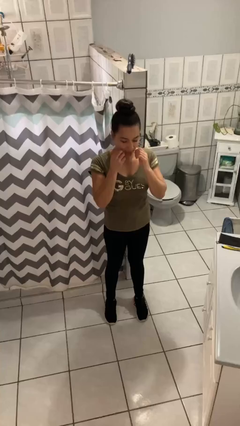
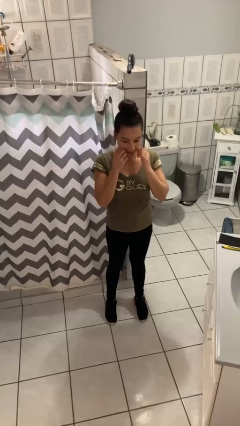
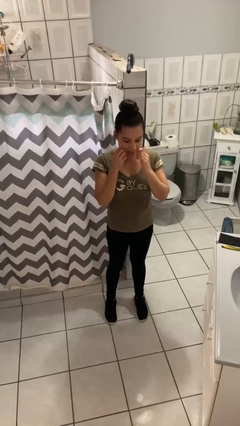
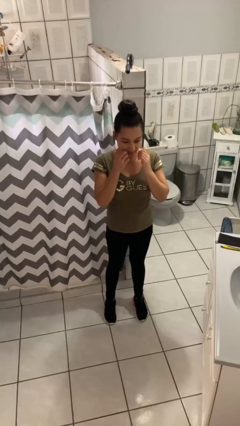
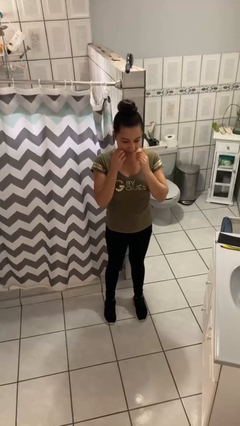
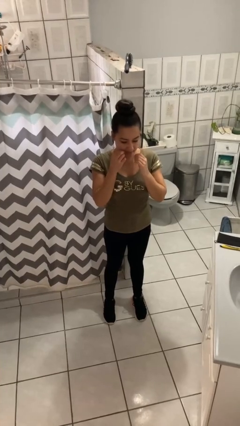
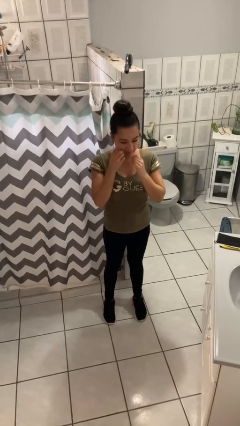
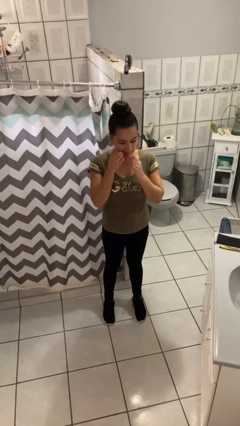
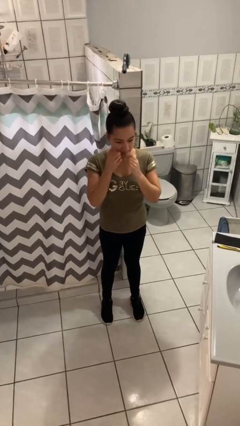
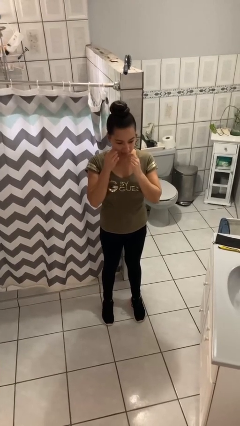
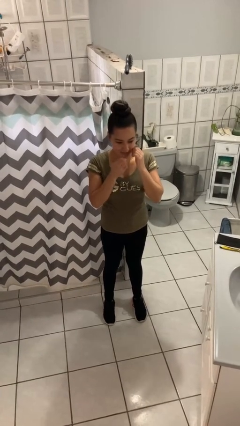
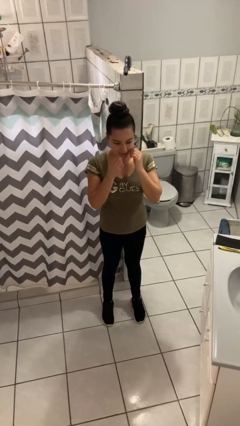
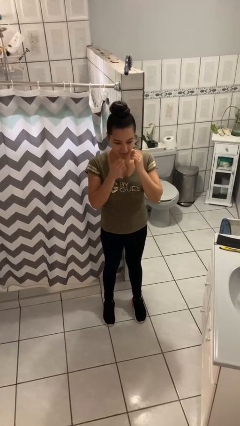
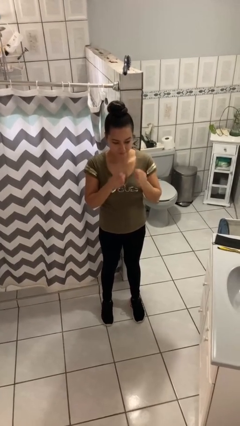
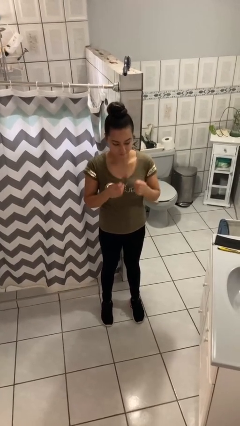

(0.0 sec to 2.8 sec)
person flosses

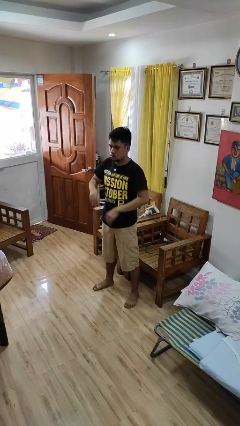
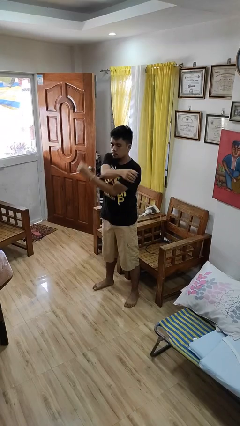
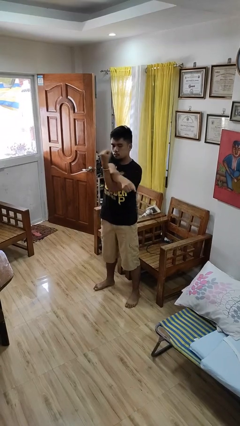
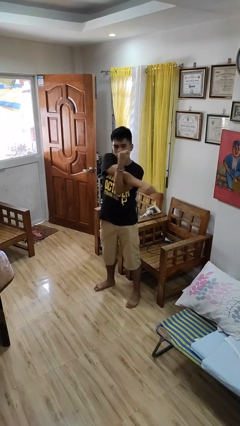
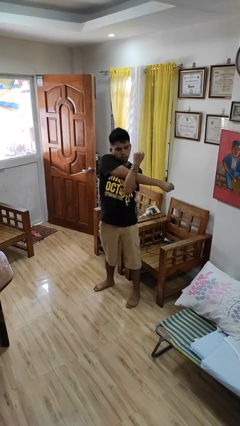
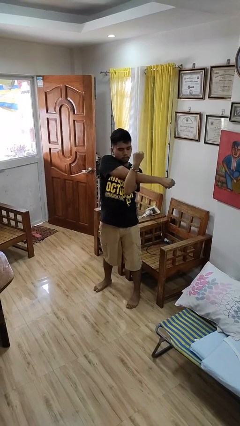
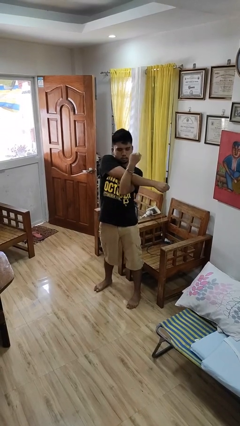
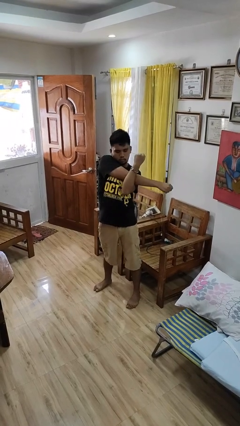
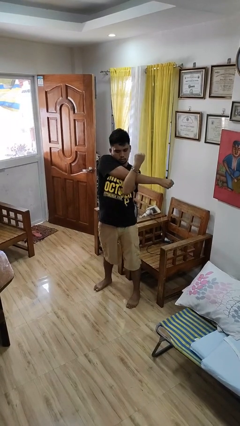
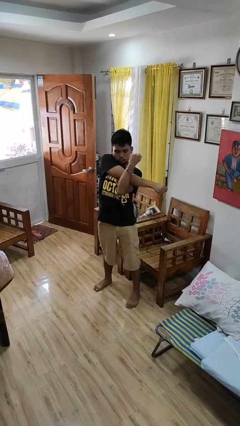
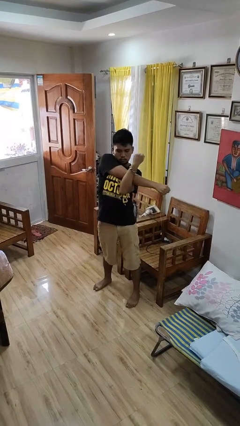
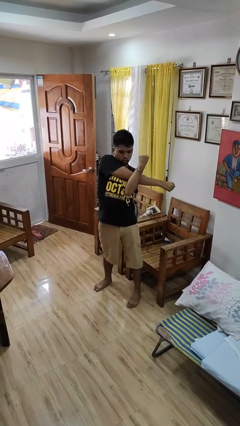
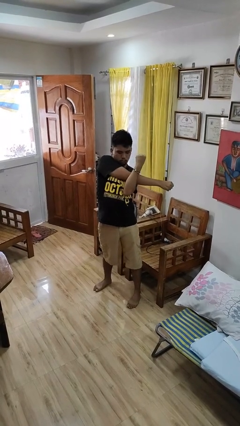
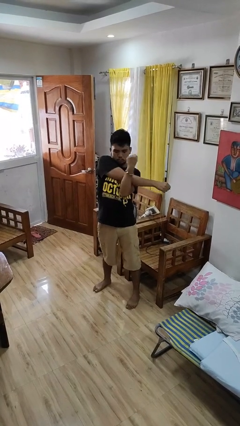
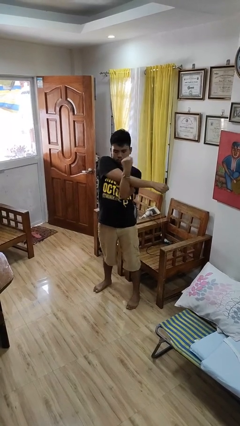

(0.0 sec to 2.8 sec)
person stretches arms to side

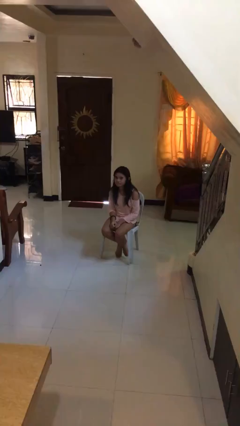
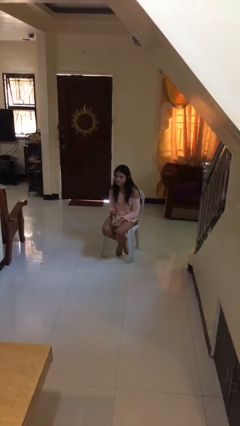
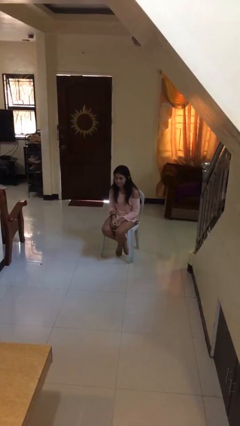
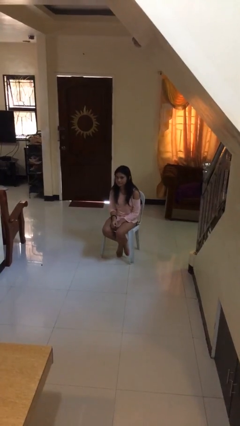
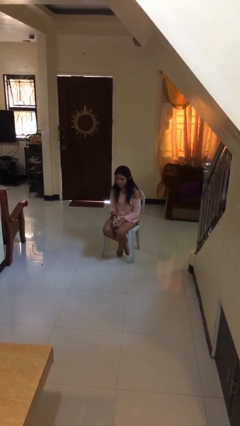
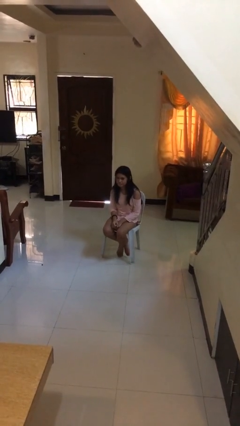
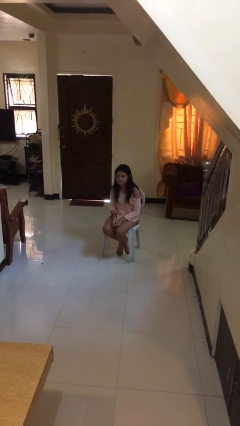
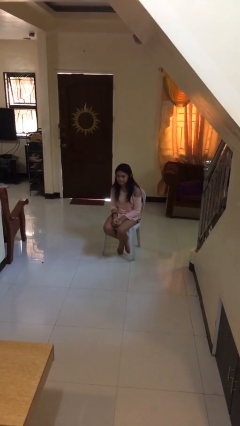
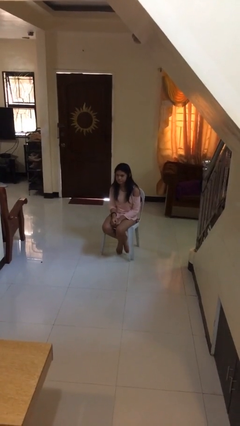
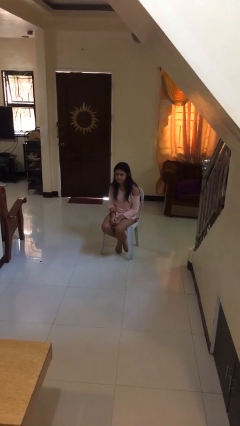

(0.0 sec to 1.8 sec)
person nods head

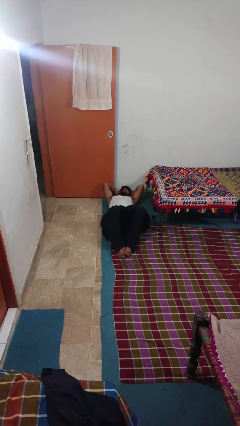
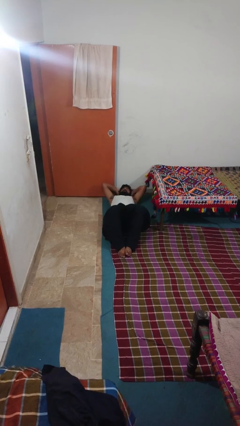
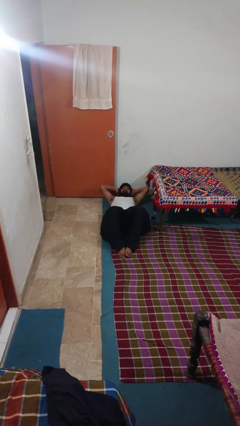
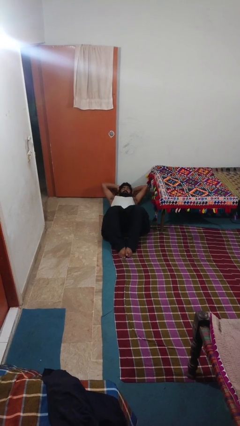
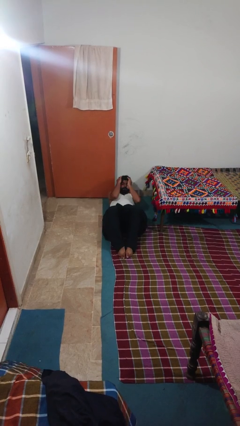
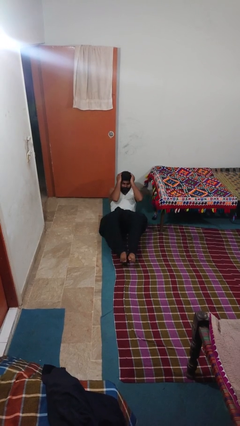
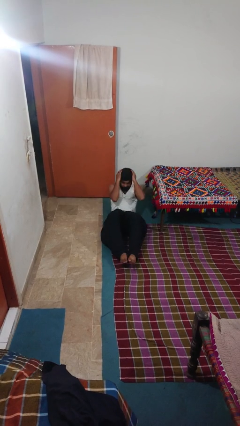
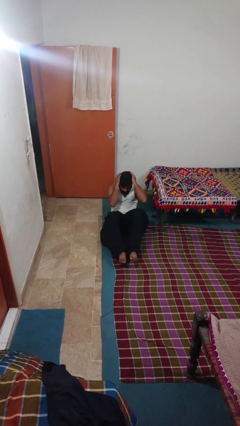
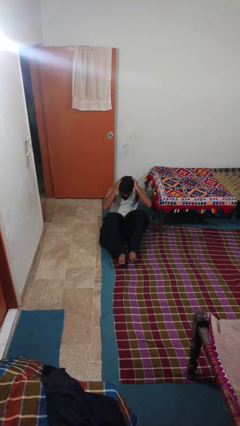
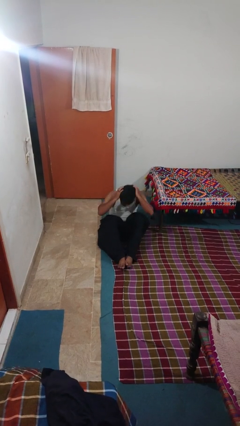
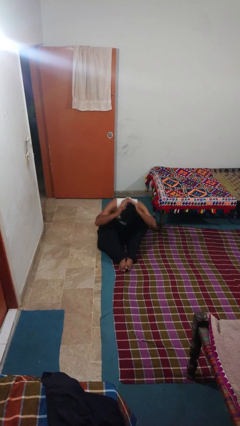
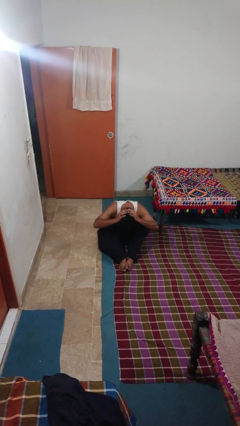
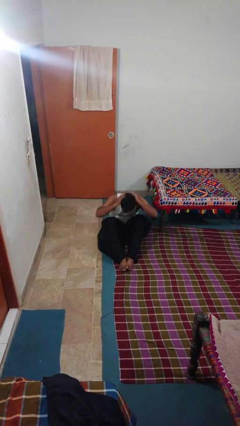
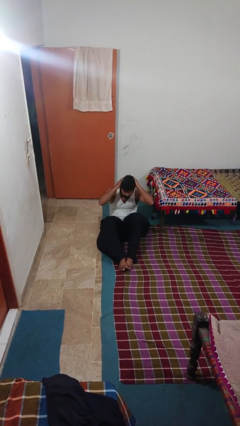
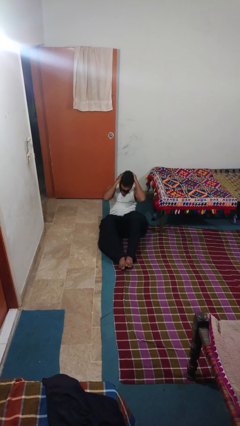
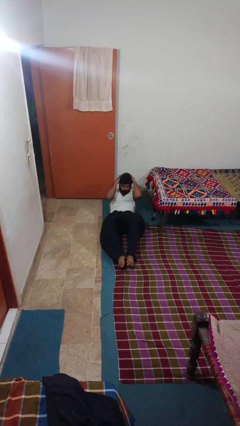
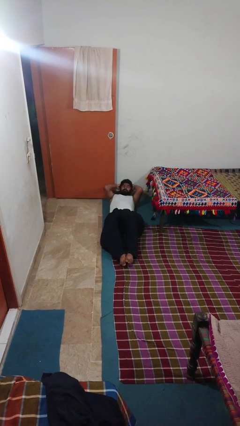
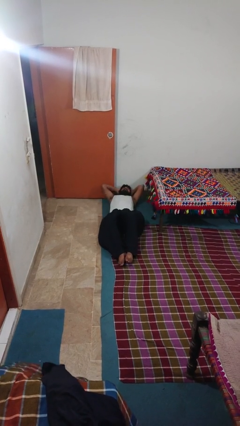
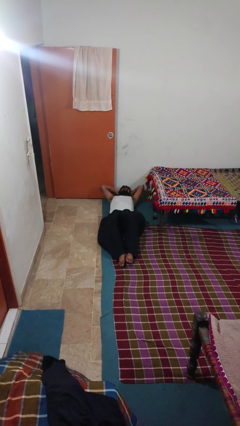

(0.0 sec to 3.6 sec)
person exercises with situp

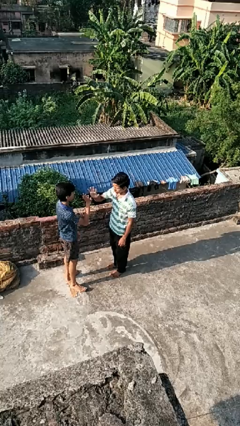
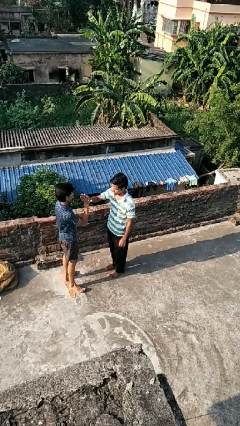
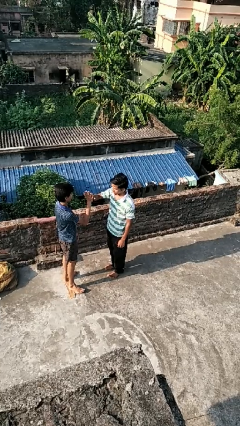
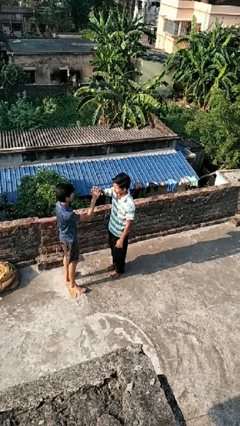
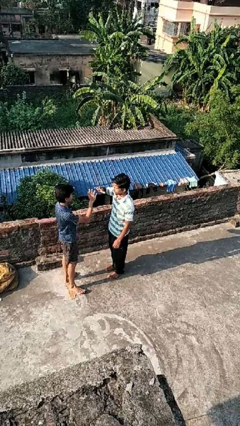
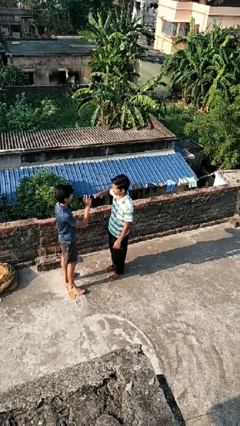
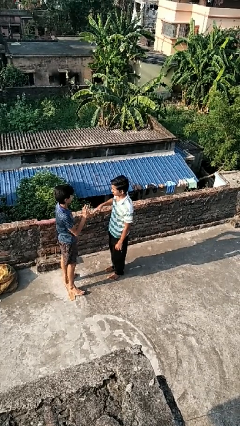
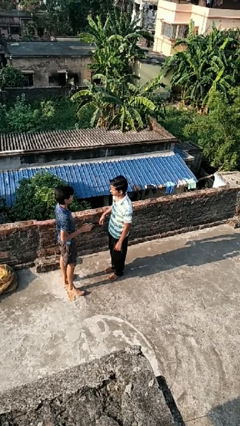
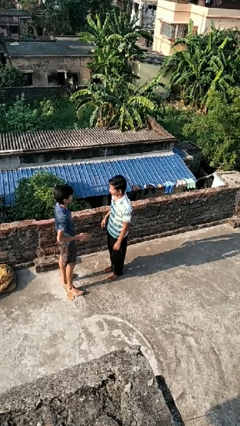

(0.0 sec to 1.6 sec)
person highfives hand

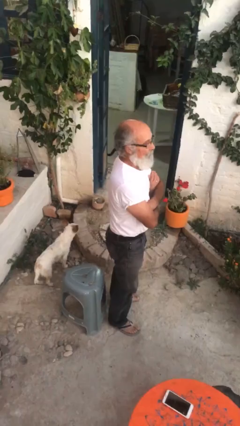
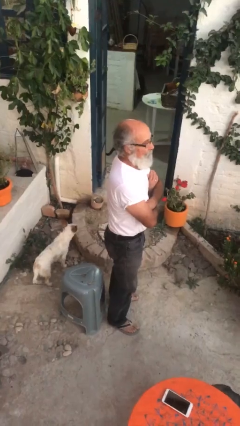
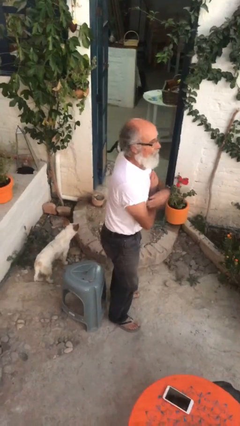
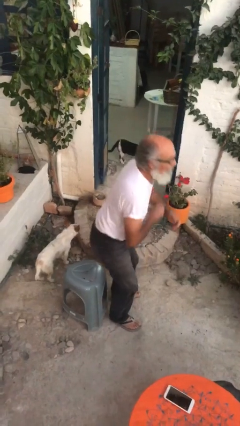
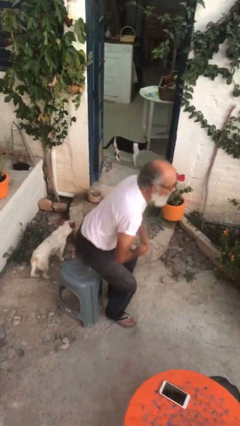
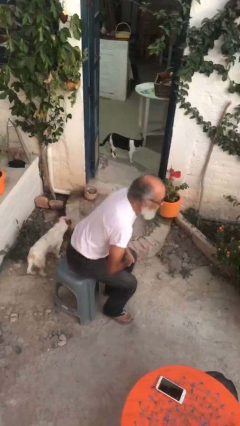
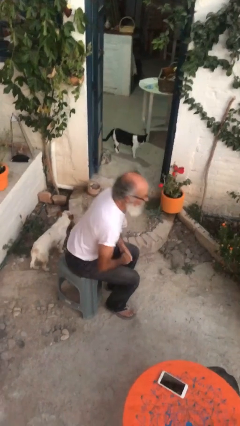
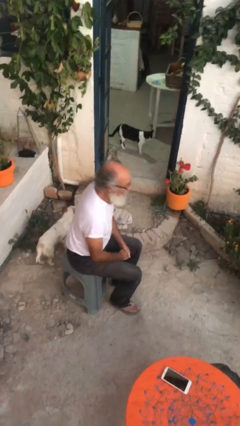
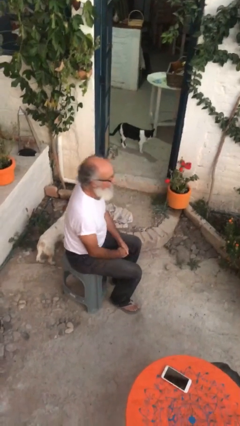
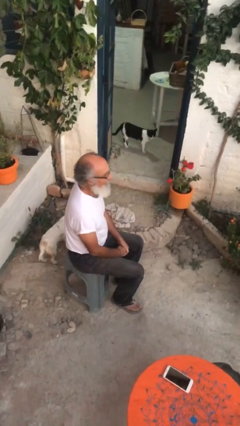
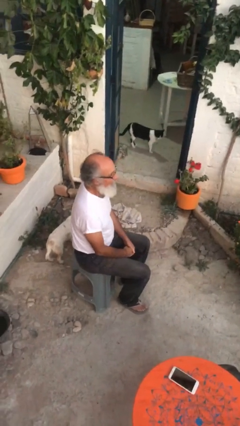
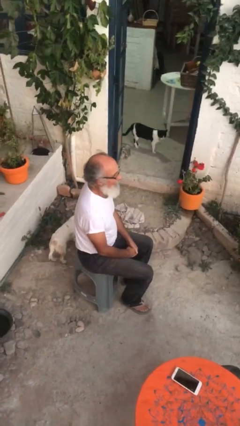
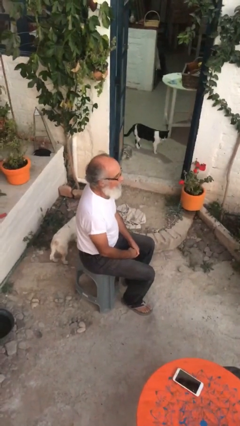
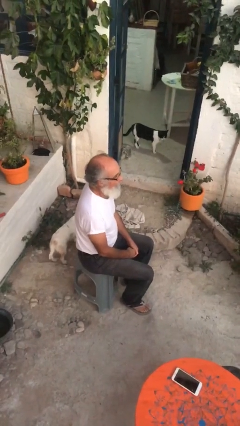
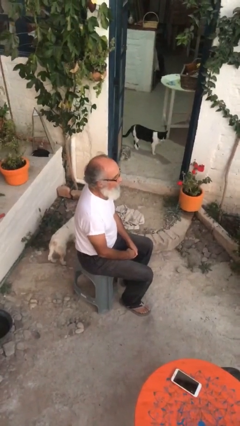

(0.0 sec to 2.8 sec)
person sits down

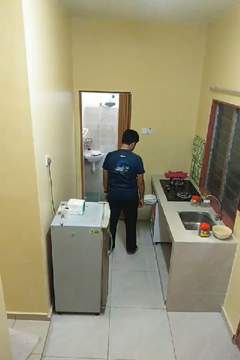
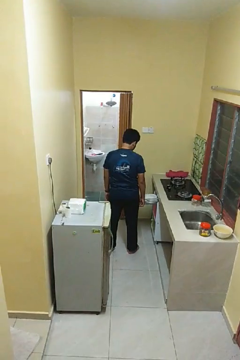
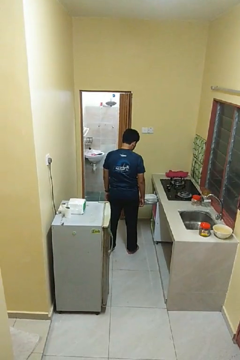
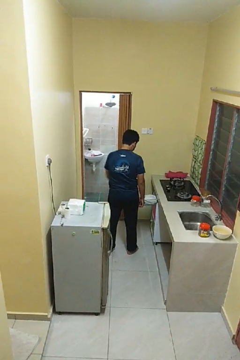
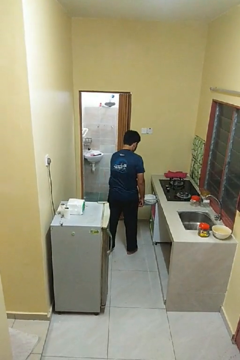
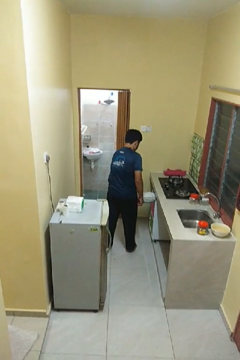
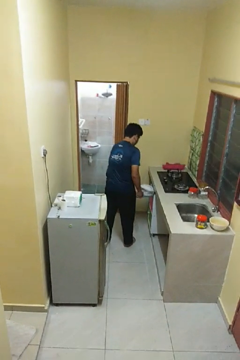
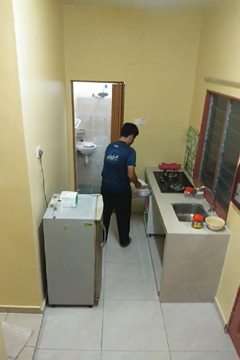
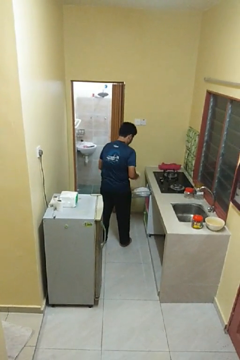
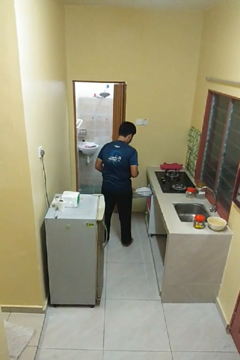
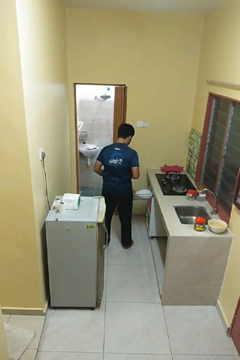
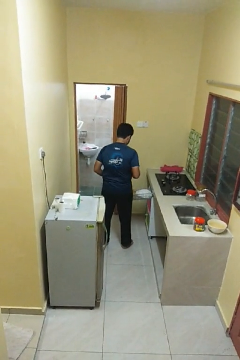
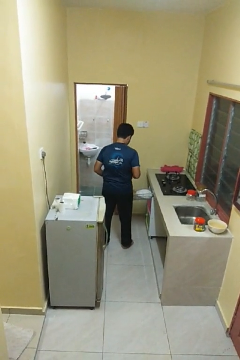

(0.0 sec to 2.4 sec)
person takes object from kitchen drawer
